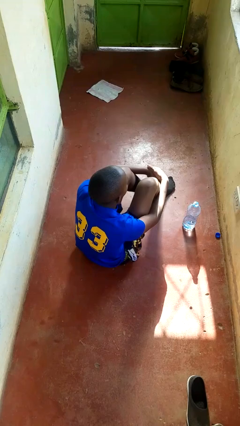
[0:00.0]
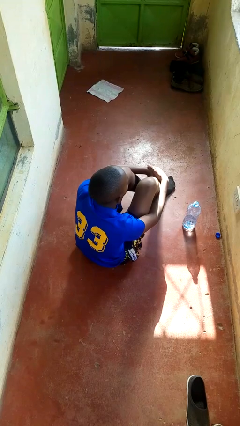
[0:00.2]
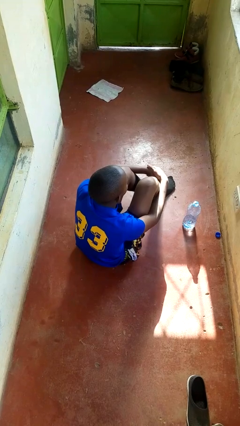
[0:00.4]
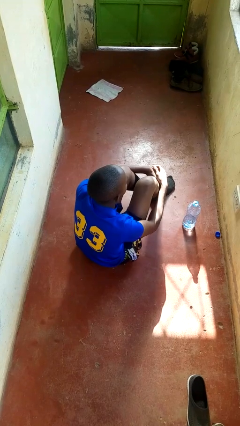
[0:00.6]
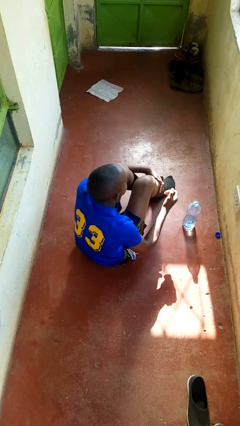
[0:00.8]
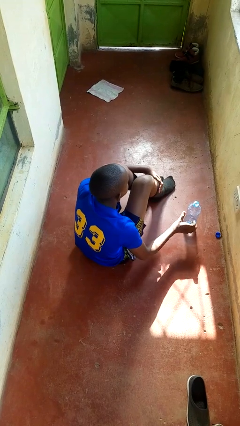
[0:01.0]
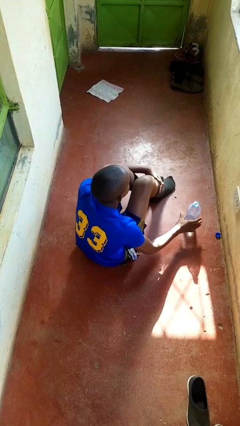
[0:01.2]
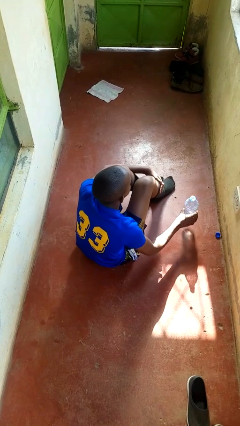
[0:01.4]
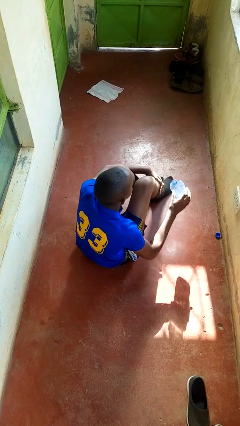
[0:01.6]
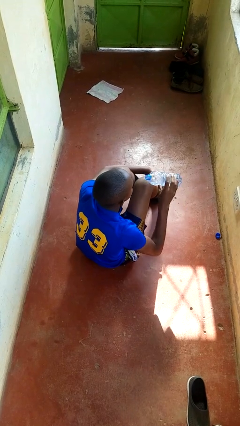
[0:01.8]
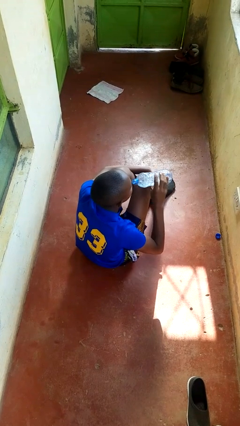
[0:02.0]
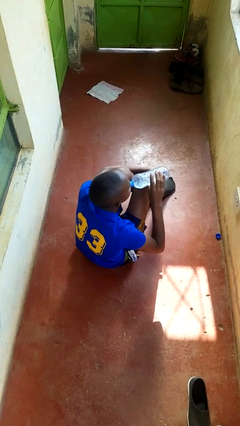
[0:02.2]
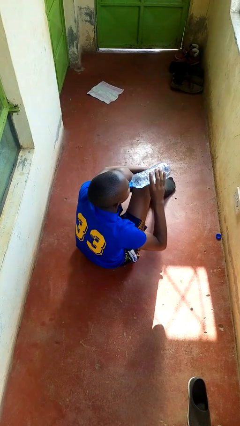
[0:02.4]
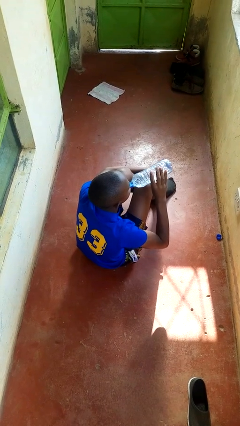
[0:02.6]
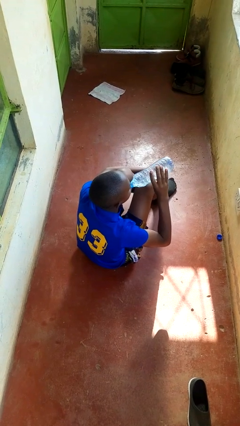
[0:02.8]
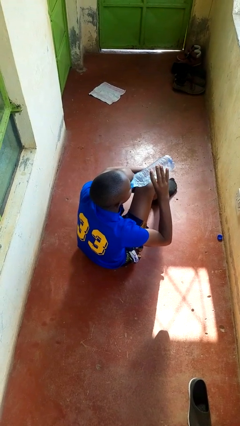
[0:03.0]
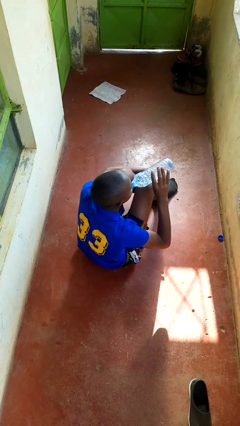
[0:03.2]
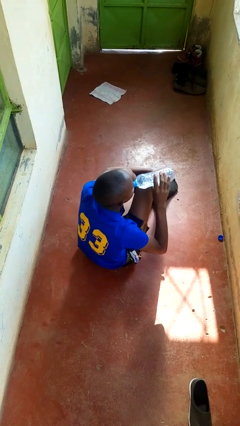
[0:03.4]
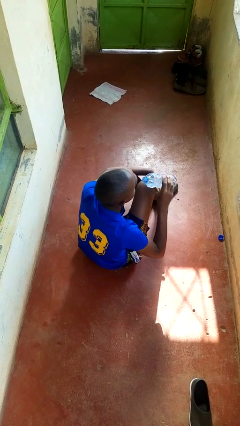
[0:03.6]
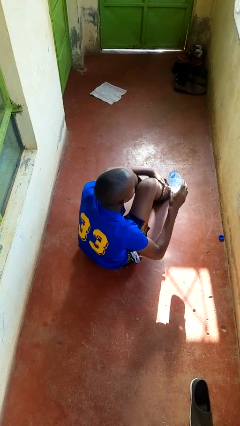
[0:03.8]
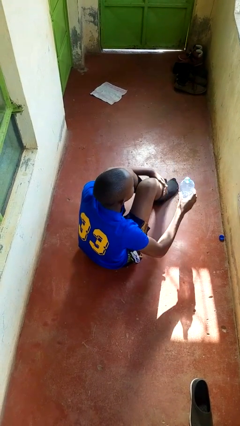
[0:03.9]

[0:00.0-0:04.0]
person drinks from bottle

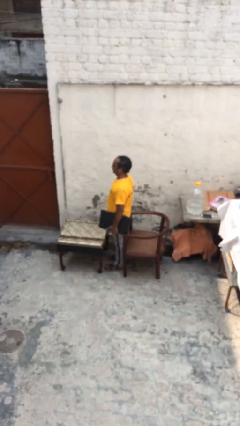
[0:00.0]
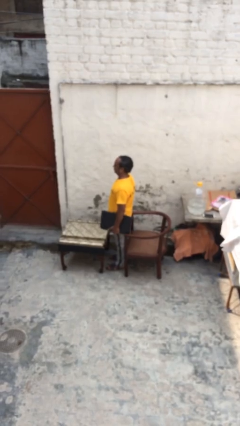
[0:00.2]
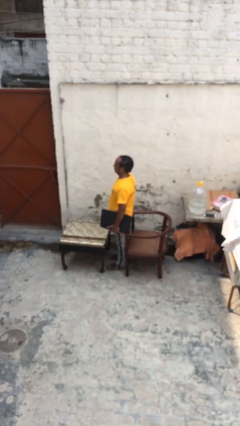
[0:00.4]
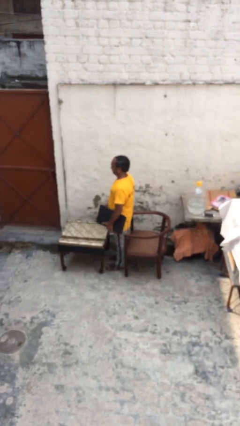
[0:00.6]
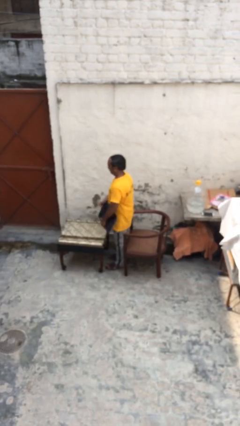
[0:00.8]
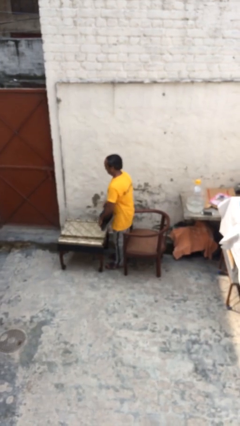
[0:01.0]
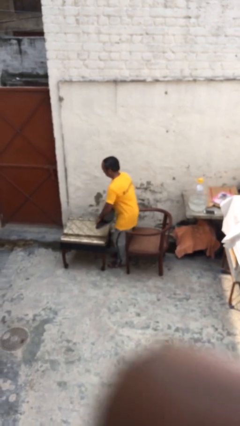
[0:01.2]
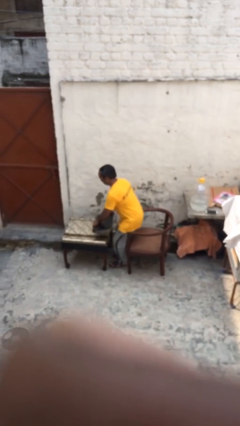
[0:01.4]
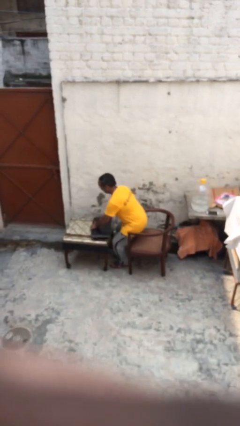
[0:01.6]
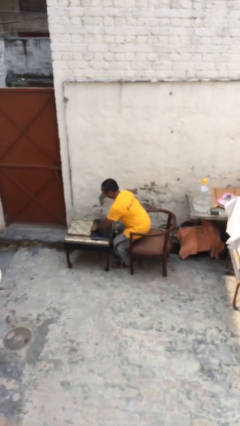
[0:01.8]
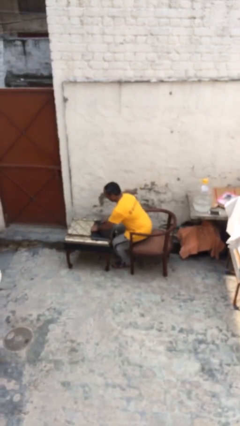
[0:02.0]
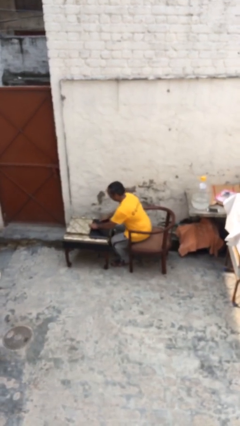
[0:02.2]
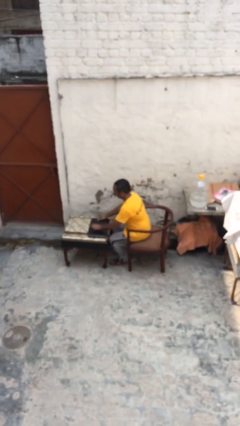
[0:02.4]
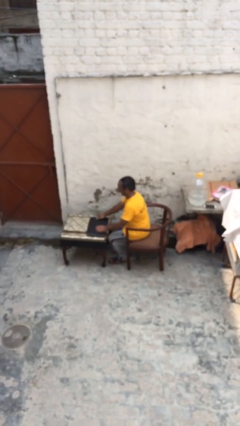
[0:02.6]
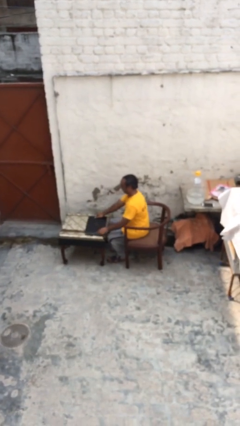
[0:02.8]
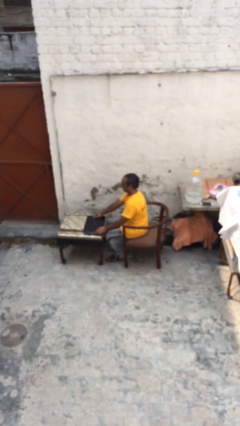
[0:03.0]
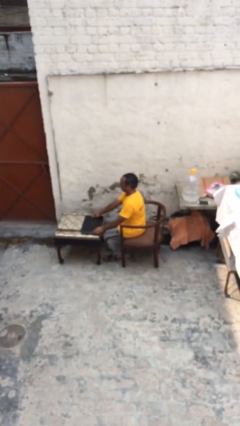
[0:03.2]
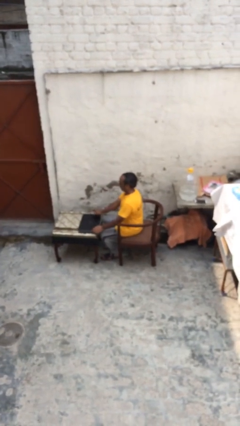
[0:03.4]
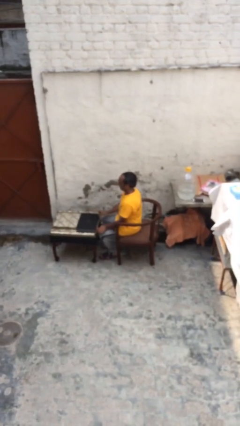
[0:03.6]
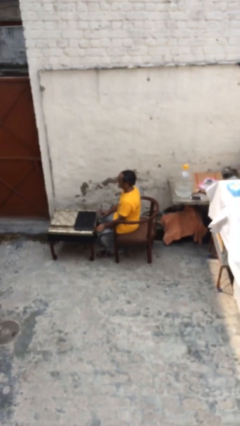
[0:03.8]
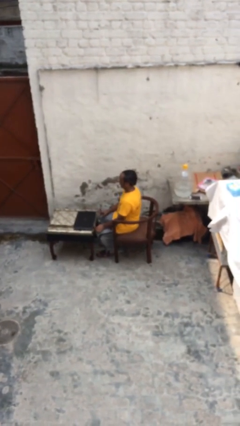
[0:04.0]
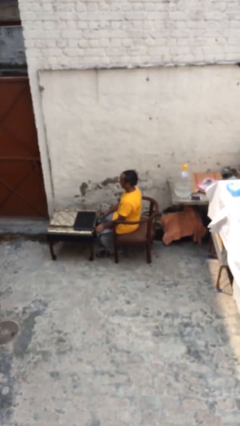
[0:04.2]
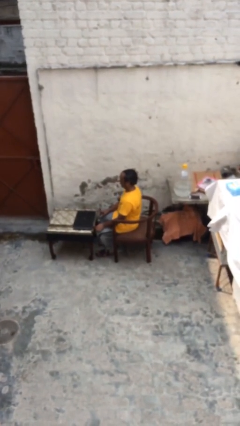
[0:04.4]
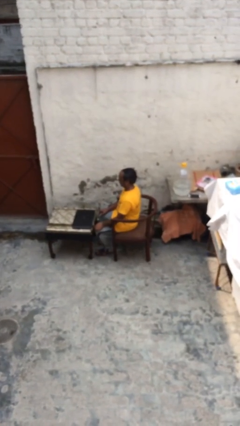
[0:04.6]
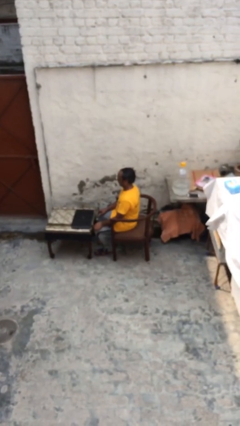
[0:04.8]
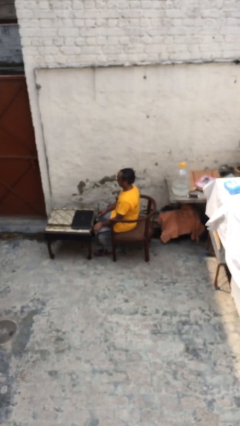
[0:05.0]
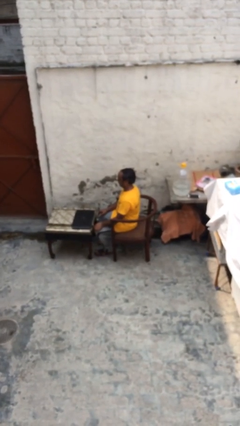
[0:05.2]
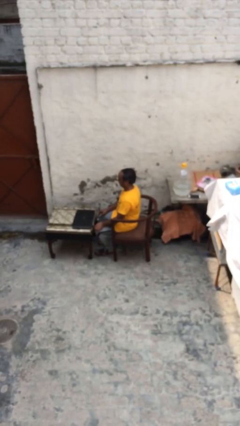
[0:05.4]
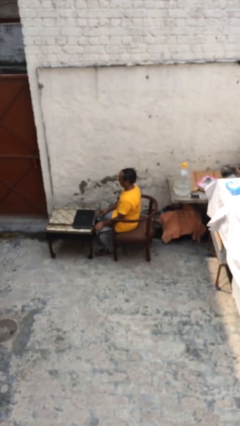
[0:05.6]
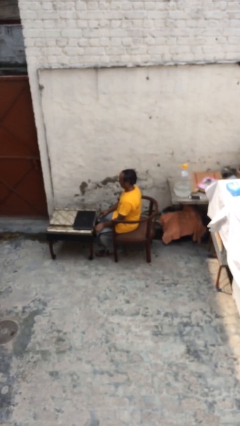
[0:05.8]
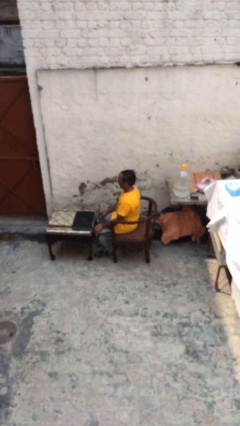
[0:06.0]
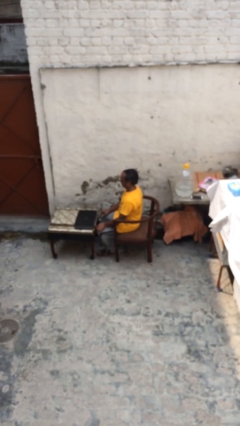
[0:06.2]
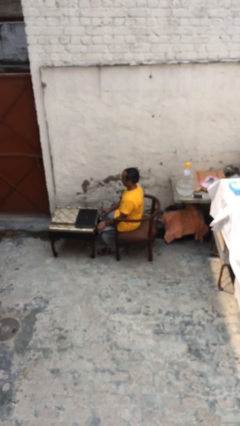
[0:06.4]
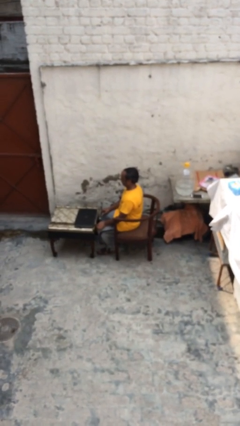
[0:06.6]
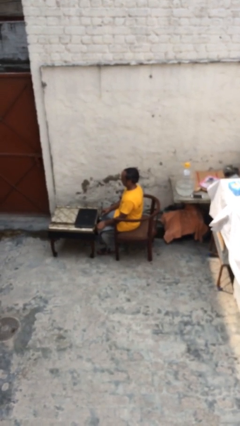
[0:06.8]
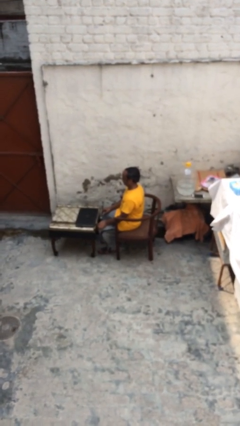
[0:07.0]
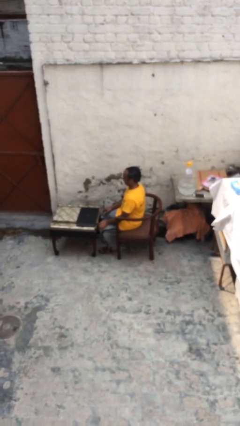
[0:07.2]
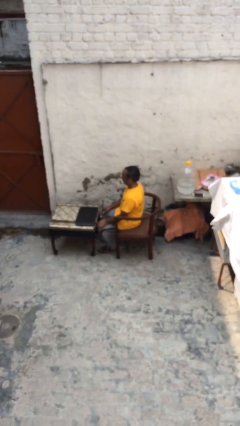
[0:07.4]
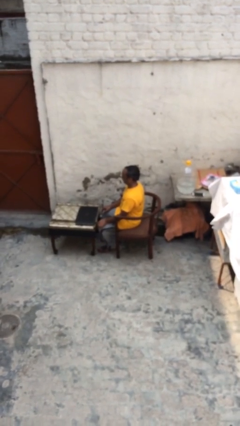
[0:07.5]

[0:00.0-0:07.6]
person sits down

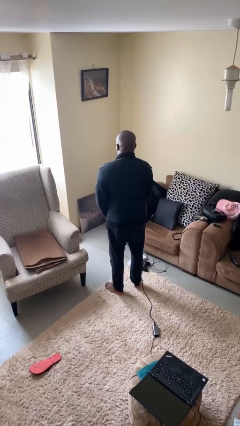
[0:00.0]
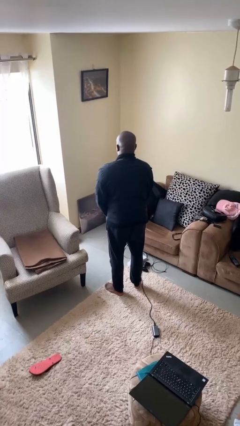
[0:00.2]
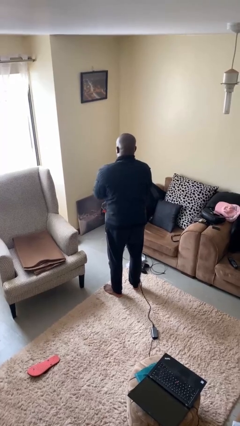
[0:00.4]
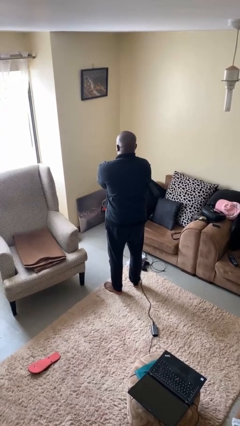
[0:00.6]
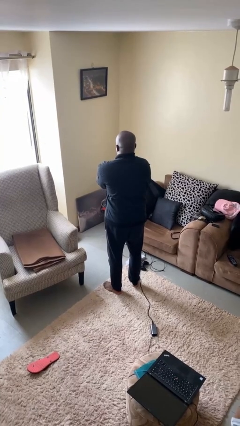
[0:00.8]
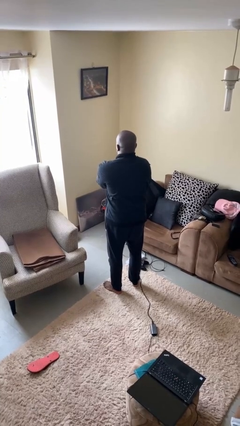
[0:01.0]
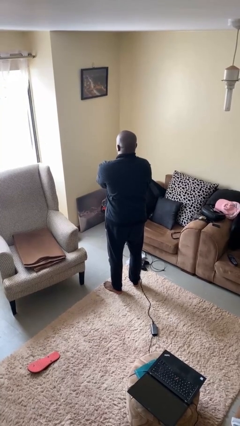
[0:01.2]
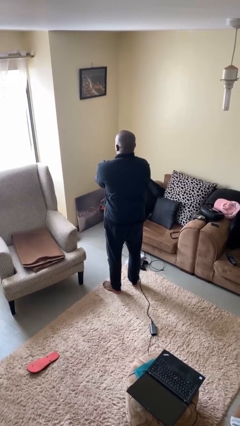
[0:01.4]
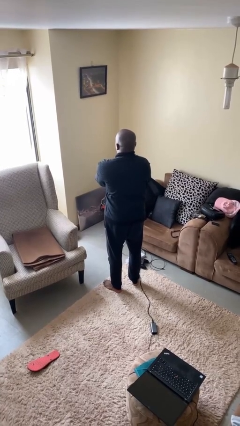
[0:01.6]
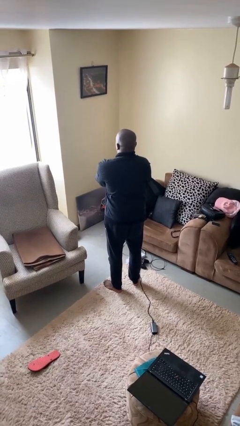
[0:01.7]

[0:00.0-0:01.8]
person zips up jacket

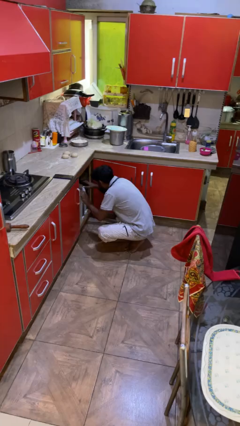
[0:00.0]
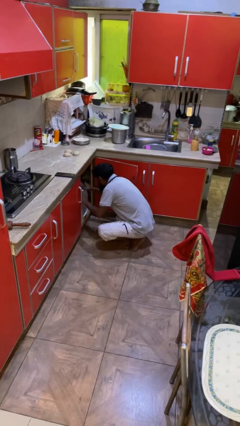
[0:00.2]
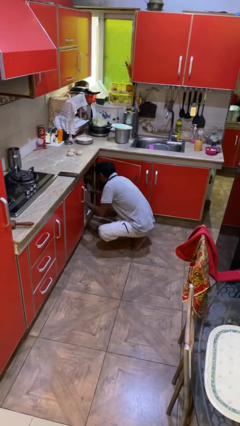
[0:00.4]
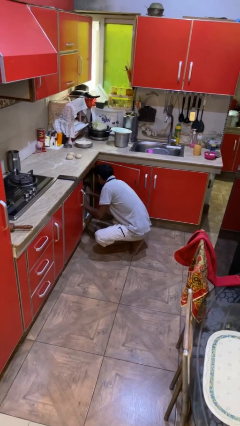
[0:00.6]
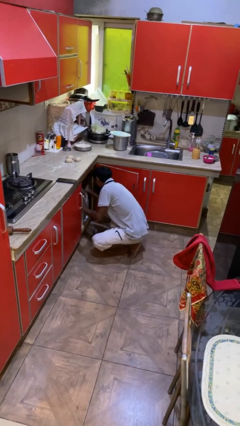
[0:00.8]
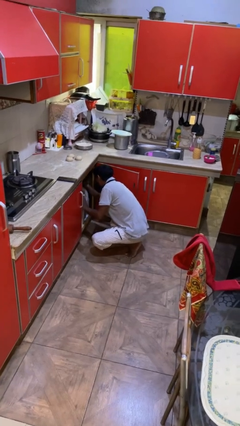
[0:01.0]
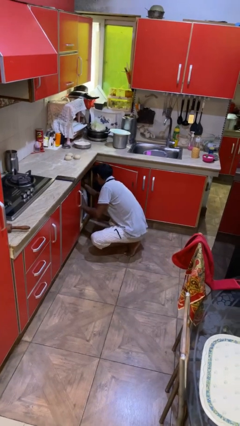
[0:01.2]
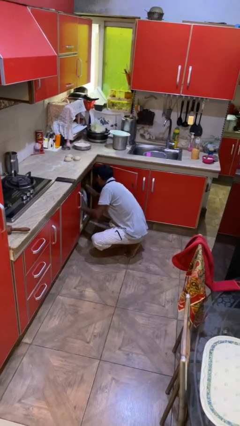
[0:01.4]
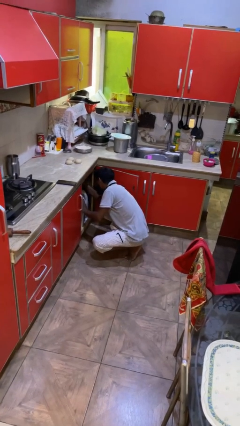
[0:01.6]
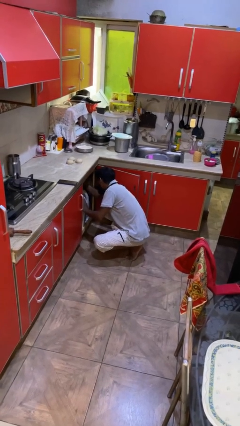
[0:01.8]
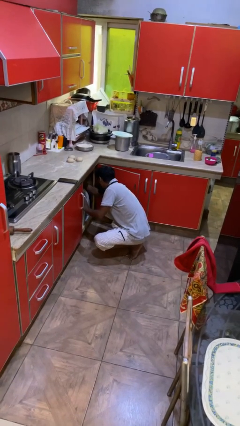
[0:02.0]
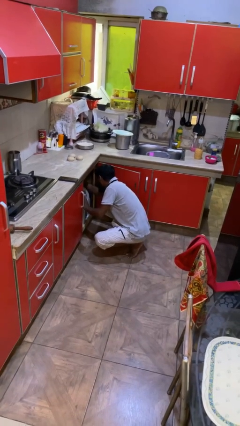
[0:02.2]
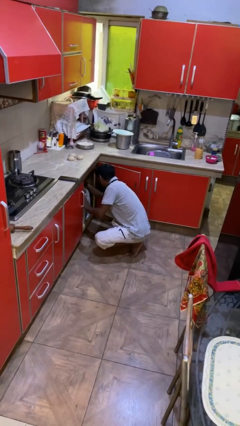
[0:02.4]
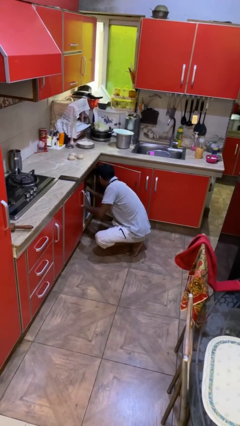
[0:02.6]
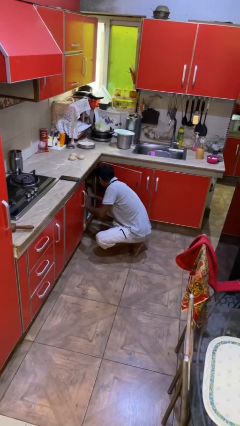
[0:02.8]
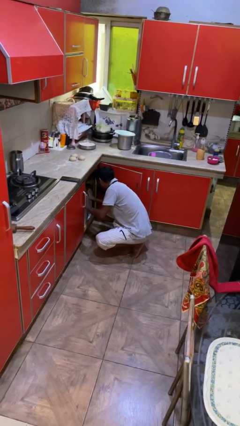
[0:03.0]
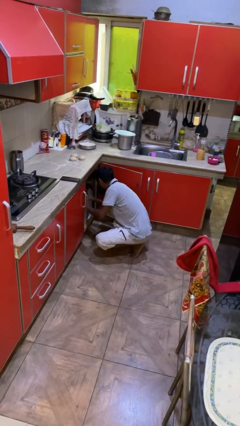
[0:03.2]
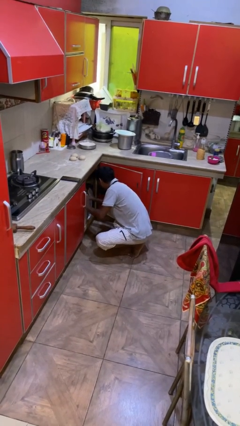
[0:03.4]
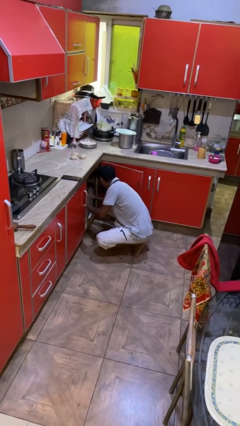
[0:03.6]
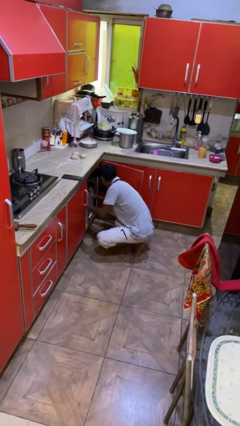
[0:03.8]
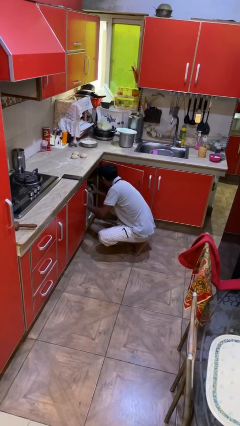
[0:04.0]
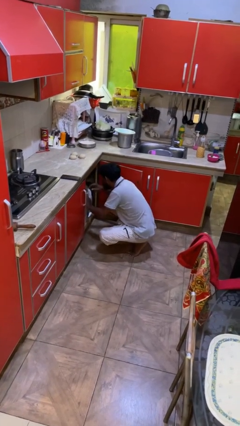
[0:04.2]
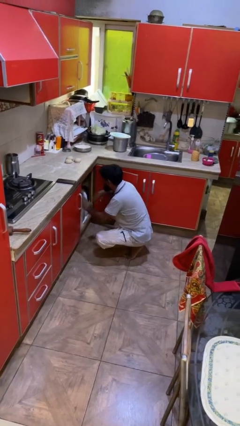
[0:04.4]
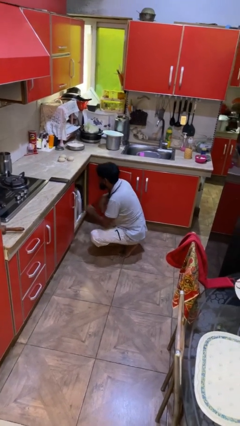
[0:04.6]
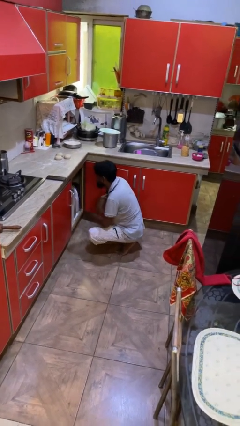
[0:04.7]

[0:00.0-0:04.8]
person searches in cabinet
